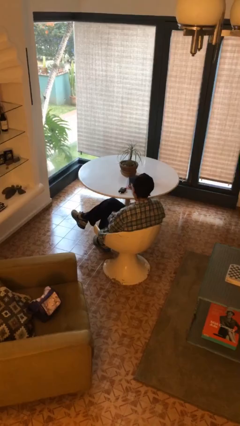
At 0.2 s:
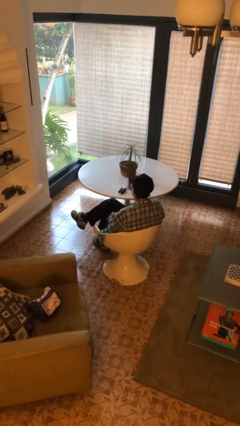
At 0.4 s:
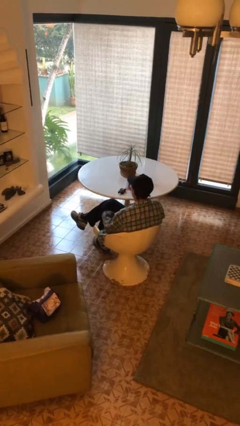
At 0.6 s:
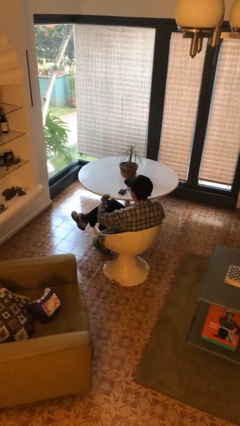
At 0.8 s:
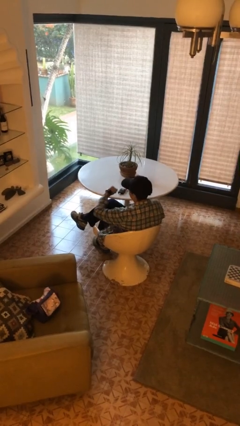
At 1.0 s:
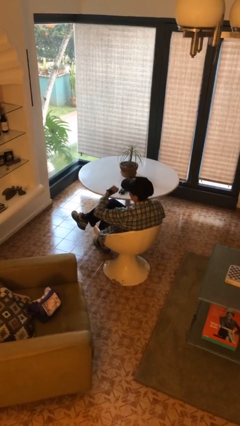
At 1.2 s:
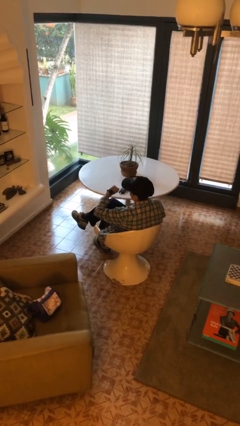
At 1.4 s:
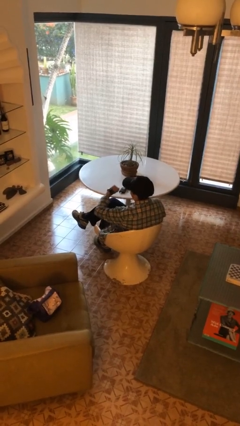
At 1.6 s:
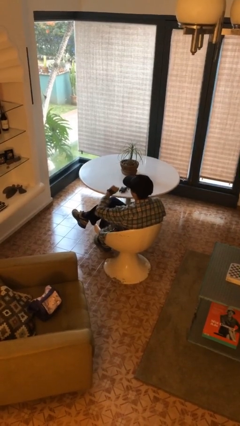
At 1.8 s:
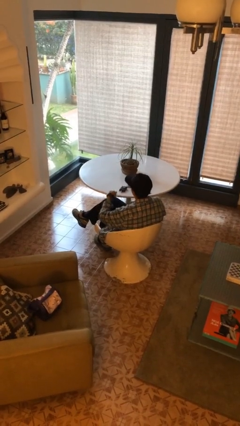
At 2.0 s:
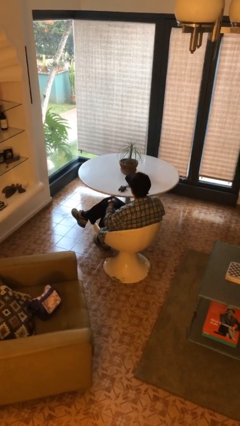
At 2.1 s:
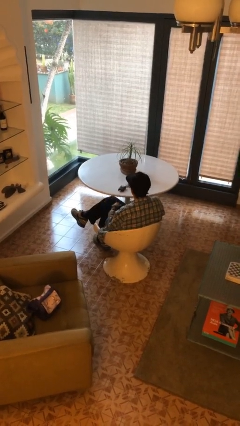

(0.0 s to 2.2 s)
person looks at wristwatch

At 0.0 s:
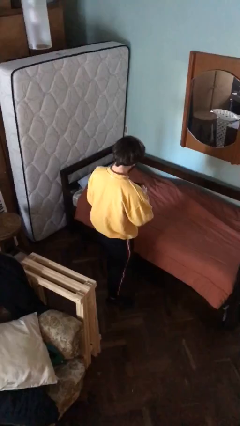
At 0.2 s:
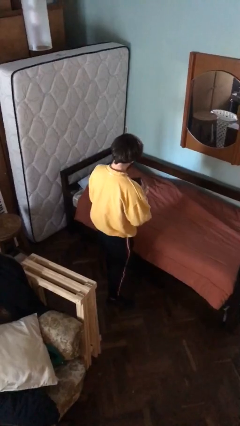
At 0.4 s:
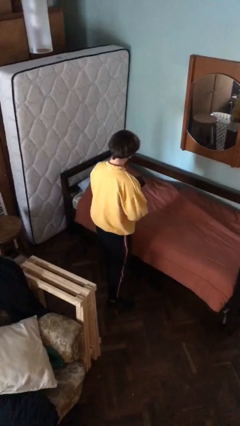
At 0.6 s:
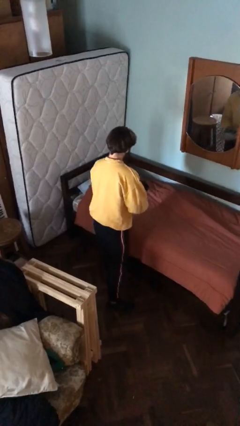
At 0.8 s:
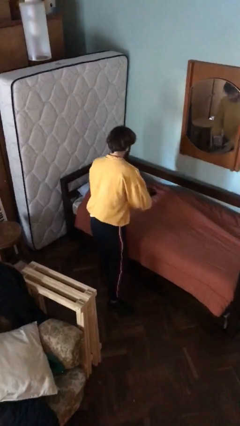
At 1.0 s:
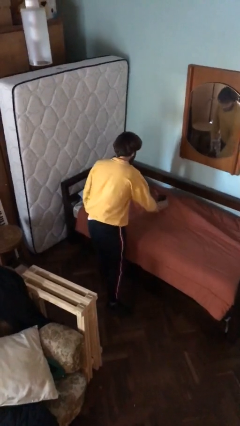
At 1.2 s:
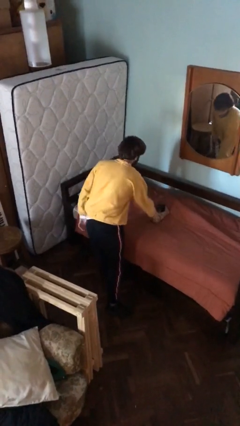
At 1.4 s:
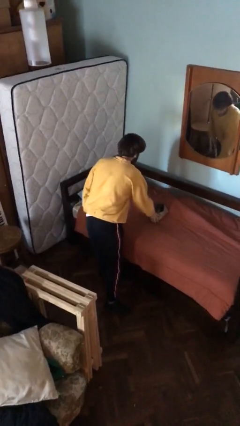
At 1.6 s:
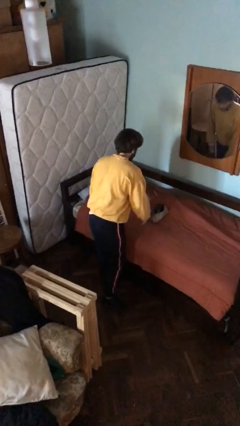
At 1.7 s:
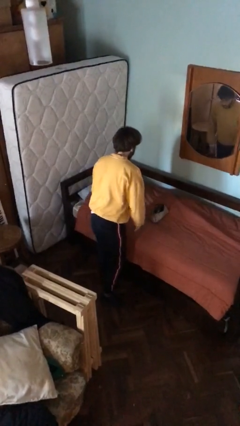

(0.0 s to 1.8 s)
person puts down object on bed

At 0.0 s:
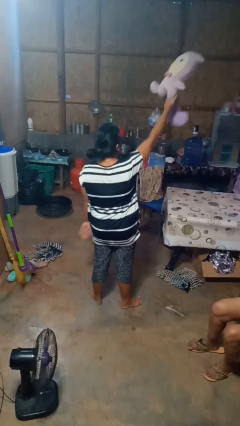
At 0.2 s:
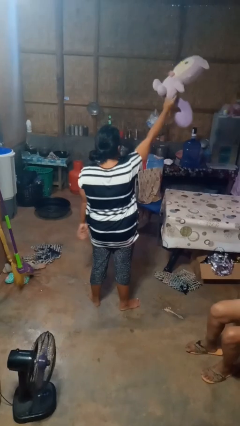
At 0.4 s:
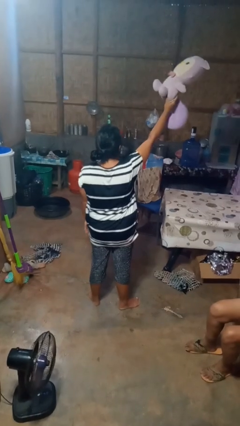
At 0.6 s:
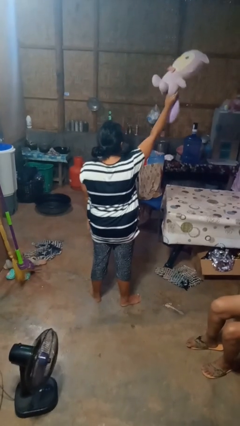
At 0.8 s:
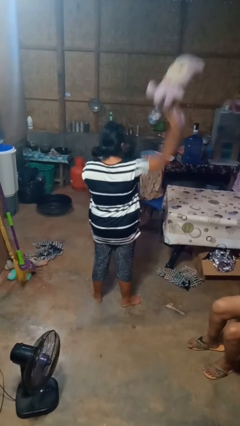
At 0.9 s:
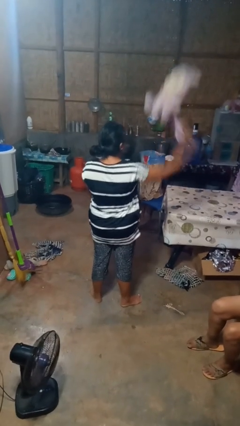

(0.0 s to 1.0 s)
person drops object

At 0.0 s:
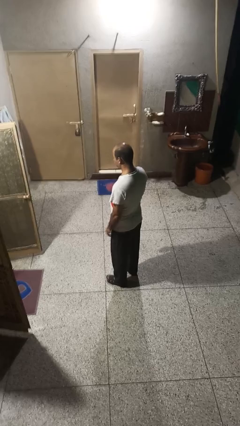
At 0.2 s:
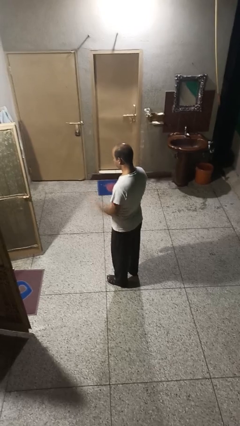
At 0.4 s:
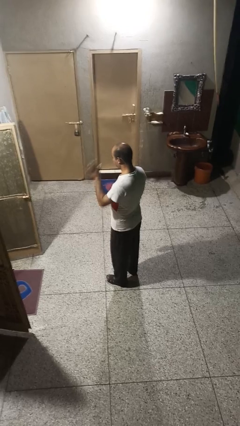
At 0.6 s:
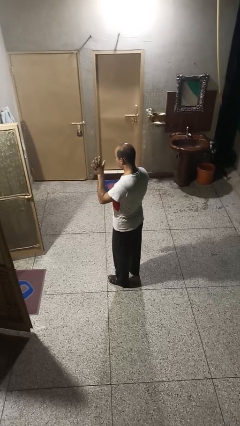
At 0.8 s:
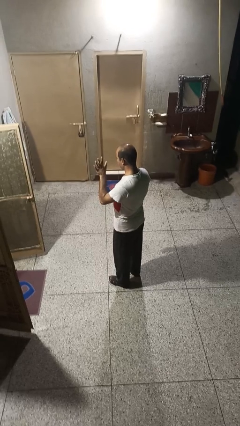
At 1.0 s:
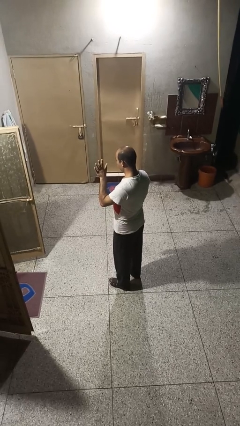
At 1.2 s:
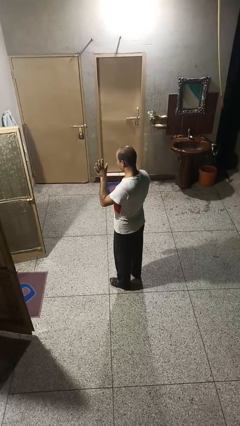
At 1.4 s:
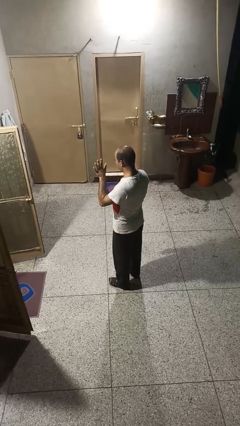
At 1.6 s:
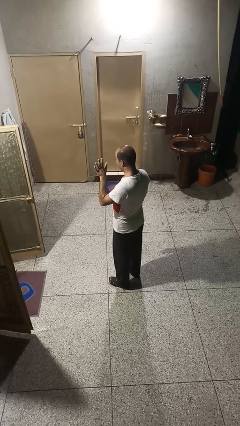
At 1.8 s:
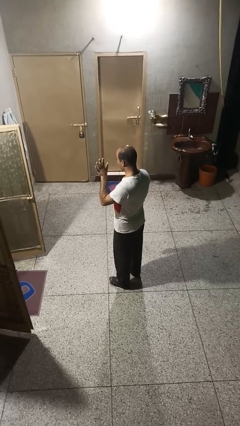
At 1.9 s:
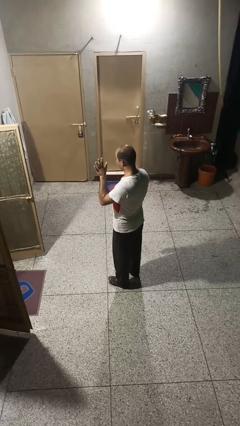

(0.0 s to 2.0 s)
person gestures number five

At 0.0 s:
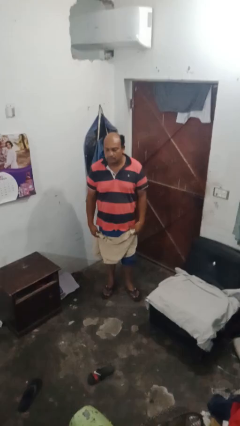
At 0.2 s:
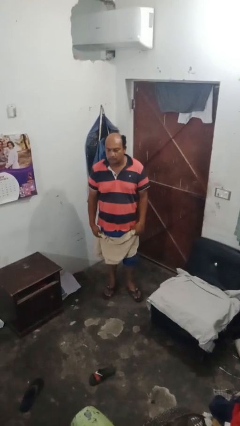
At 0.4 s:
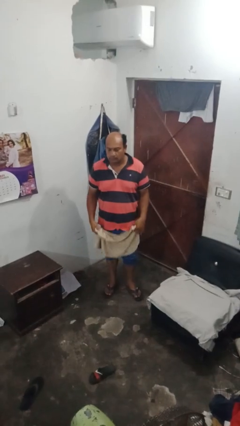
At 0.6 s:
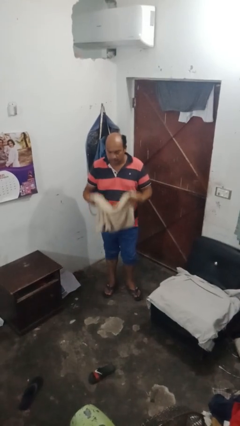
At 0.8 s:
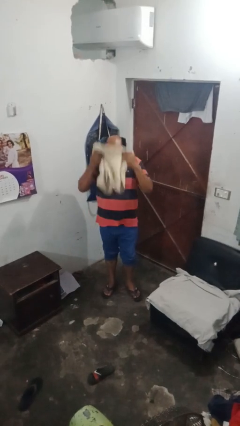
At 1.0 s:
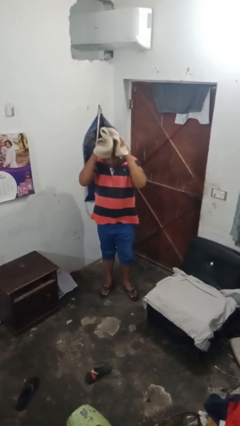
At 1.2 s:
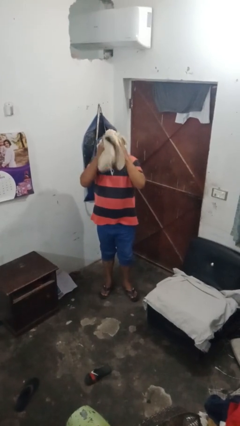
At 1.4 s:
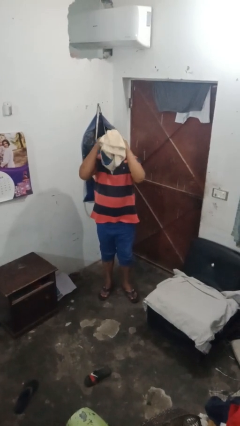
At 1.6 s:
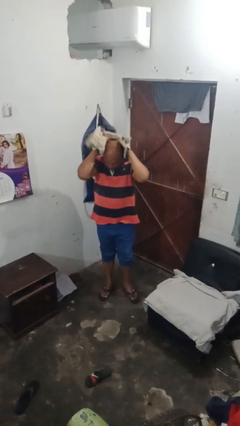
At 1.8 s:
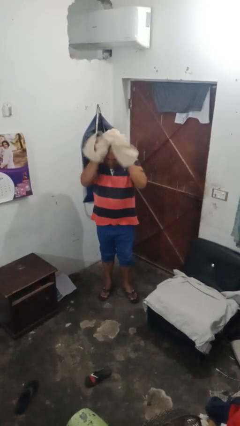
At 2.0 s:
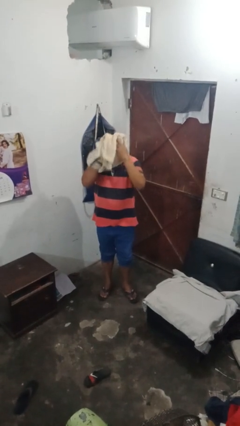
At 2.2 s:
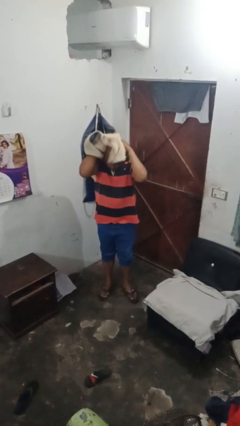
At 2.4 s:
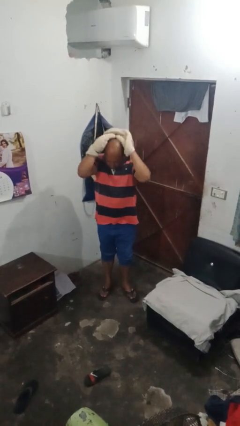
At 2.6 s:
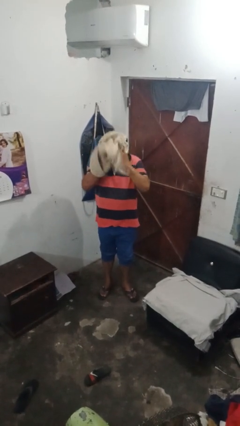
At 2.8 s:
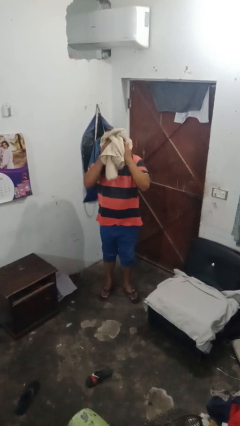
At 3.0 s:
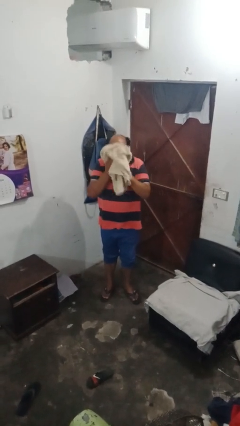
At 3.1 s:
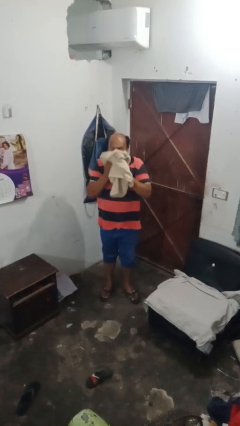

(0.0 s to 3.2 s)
person dries hair with towel

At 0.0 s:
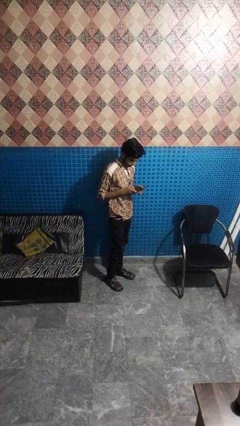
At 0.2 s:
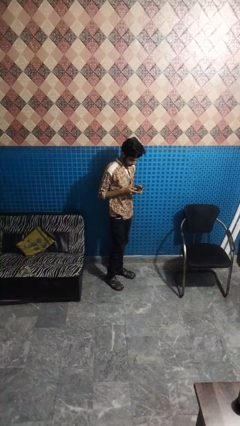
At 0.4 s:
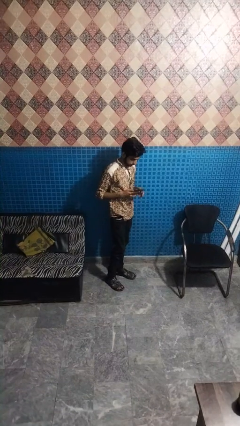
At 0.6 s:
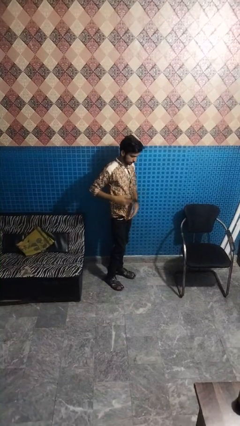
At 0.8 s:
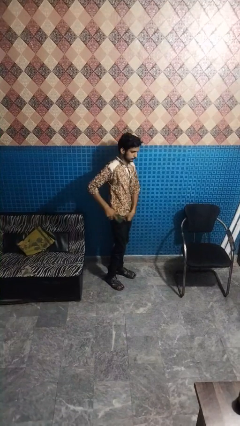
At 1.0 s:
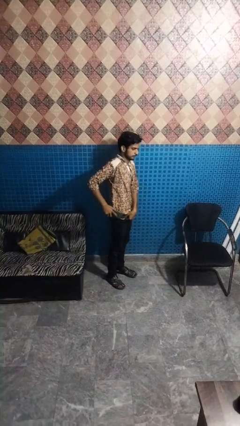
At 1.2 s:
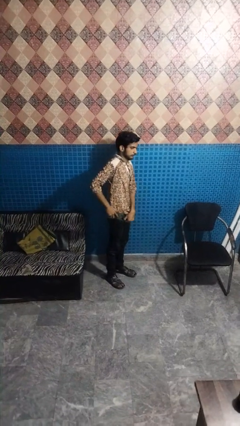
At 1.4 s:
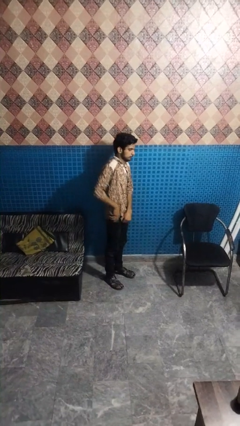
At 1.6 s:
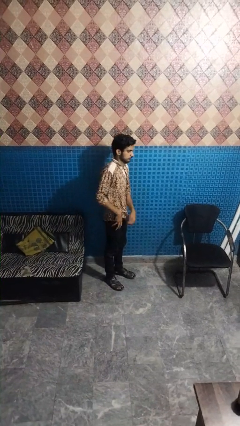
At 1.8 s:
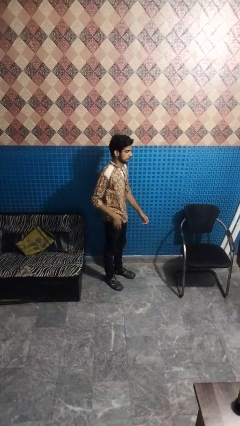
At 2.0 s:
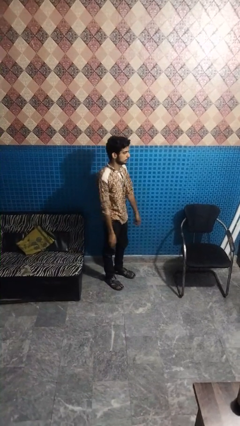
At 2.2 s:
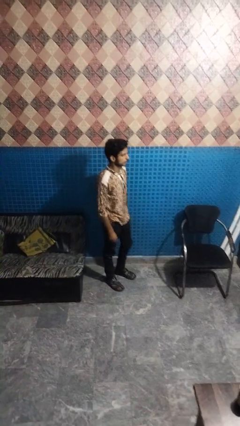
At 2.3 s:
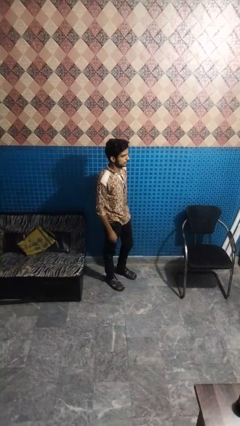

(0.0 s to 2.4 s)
person puts phone into pocket

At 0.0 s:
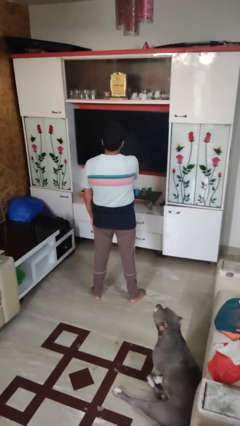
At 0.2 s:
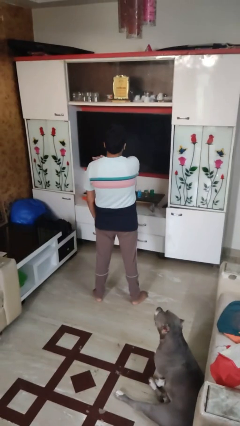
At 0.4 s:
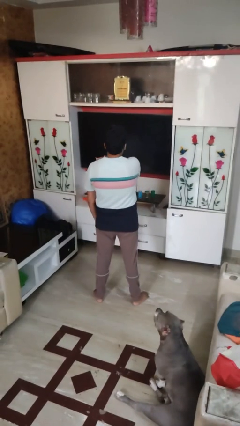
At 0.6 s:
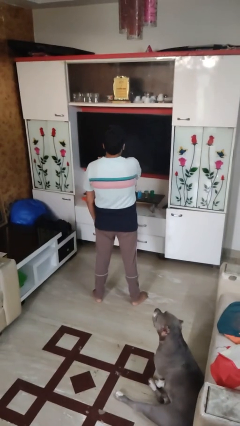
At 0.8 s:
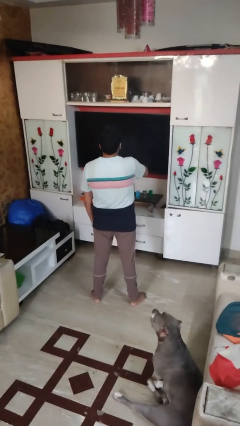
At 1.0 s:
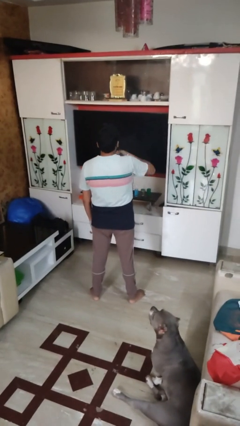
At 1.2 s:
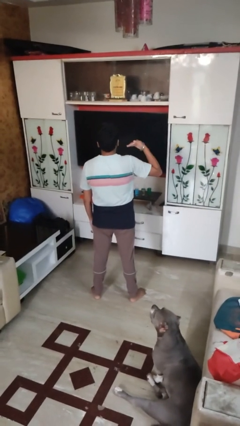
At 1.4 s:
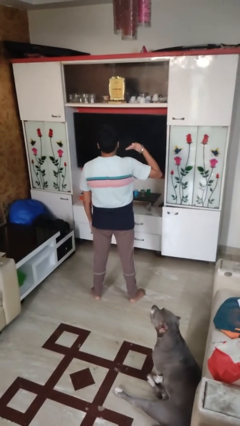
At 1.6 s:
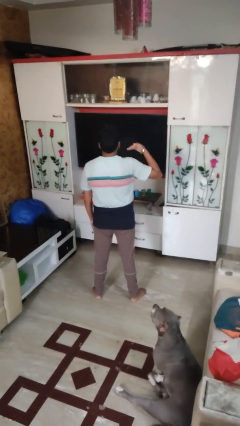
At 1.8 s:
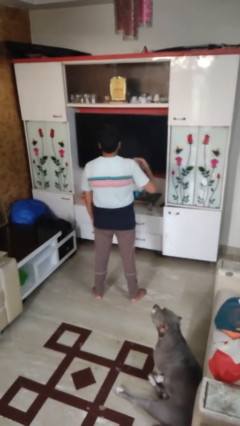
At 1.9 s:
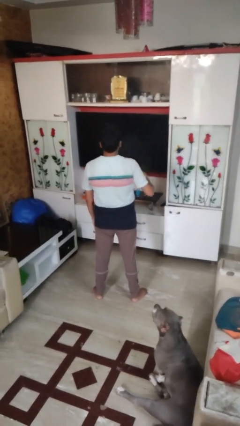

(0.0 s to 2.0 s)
person gestures cut

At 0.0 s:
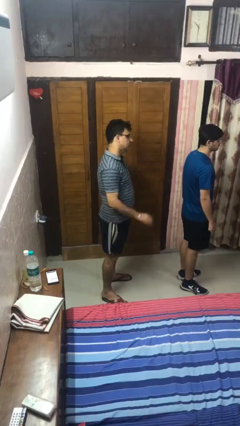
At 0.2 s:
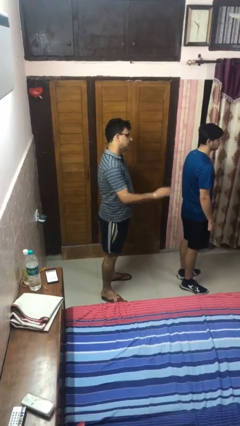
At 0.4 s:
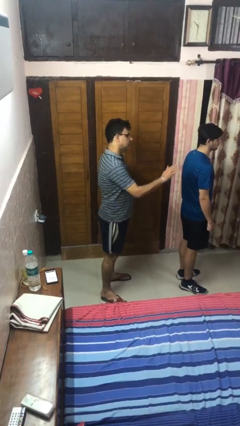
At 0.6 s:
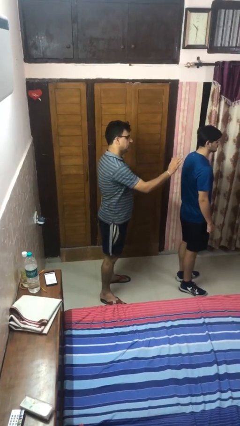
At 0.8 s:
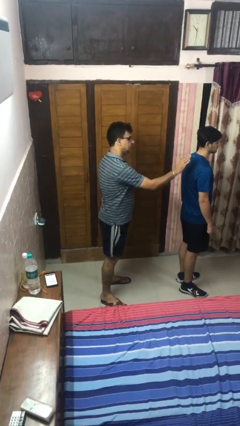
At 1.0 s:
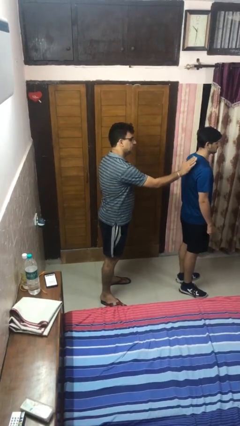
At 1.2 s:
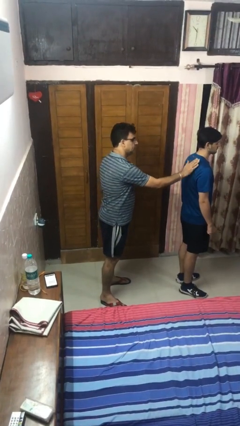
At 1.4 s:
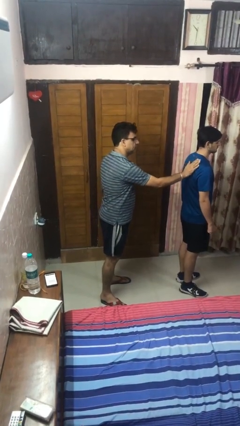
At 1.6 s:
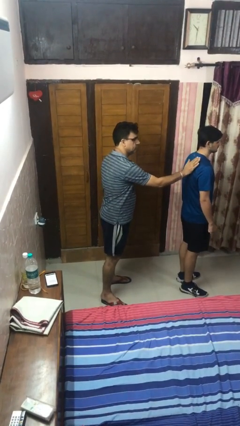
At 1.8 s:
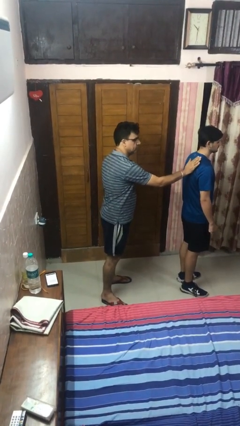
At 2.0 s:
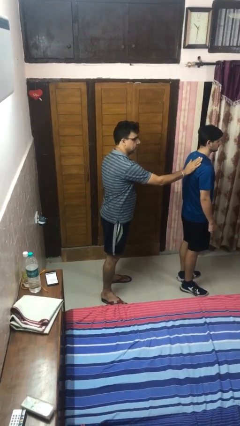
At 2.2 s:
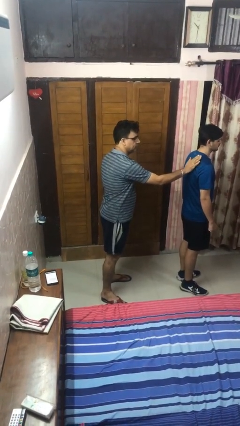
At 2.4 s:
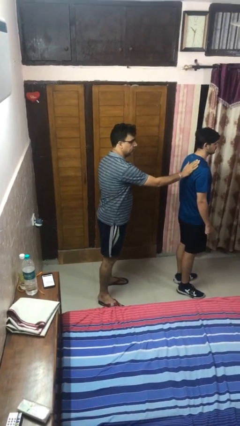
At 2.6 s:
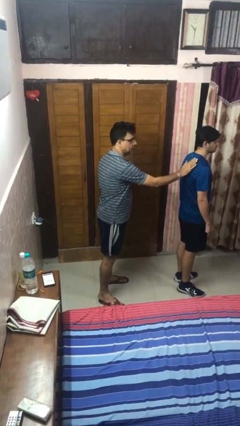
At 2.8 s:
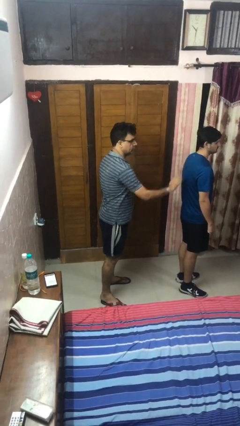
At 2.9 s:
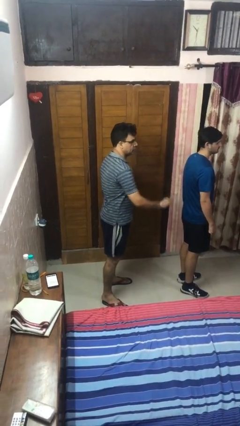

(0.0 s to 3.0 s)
person touches back of person
